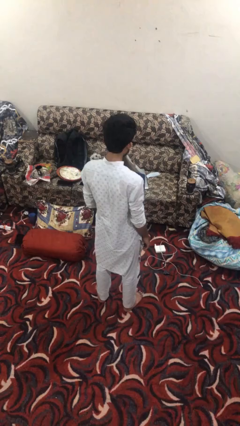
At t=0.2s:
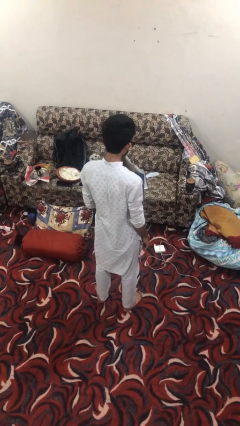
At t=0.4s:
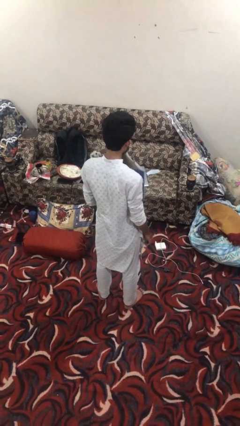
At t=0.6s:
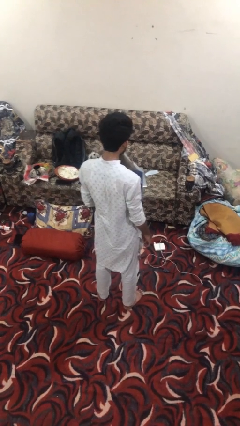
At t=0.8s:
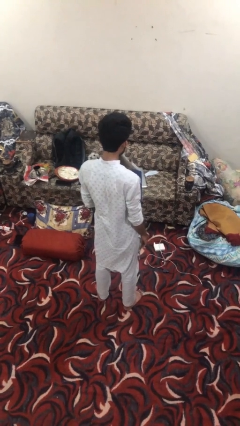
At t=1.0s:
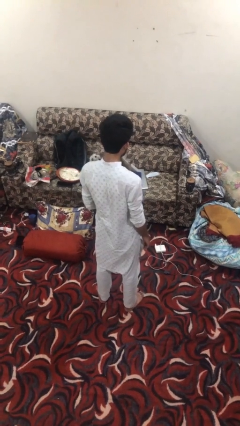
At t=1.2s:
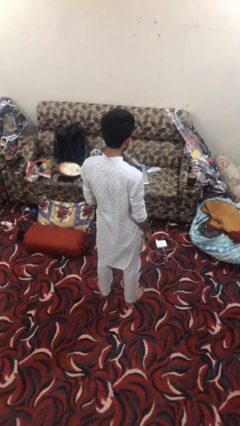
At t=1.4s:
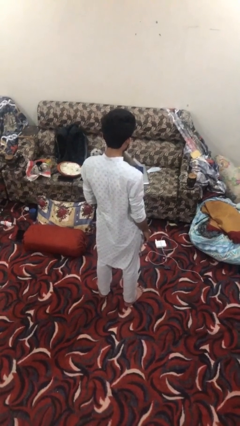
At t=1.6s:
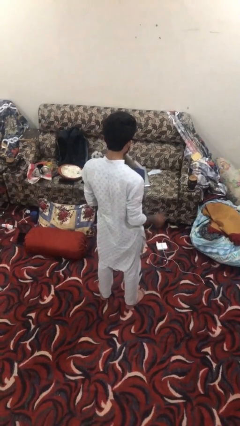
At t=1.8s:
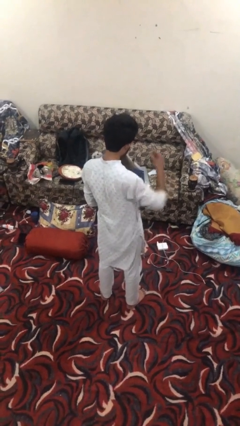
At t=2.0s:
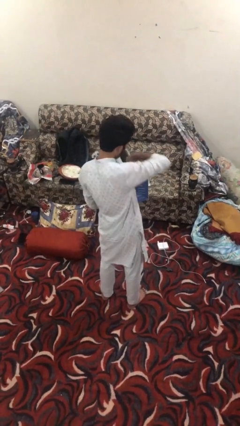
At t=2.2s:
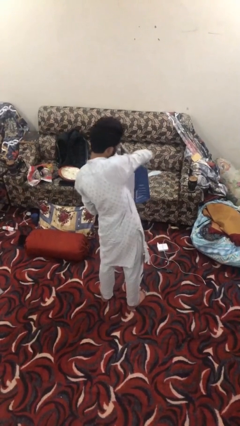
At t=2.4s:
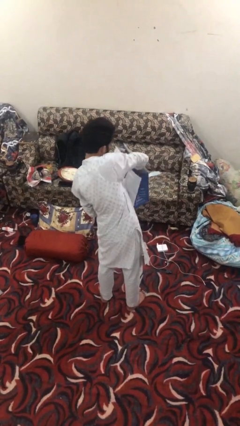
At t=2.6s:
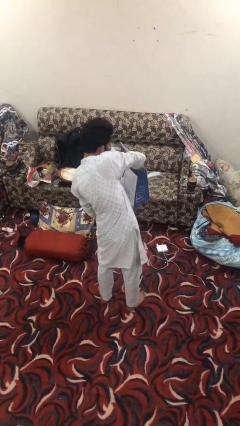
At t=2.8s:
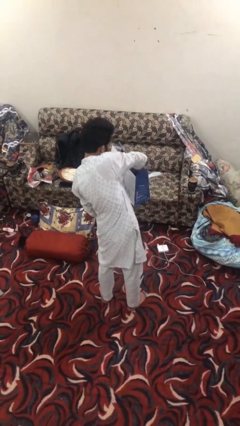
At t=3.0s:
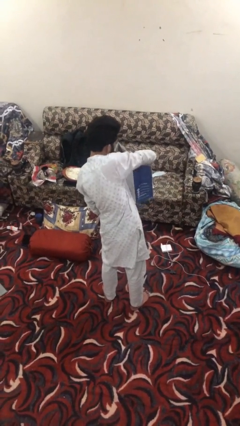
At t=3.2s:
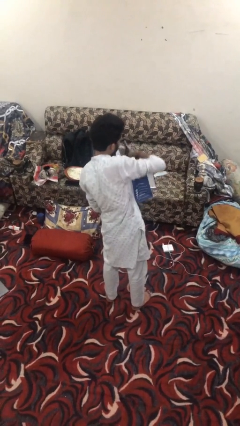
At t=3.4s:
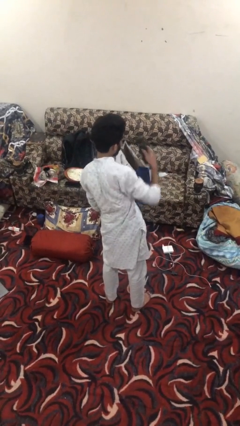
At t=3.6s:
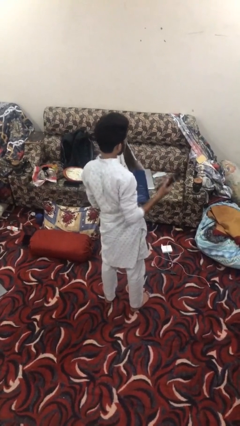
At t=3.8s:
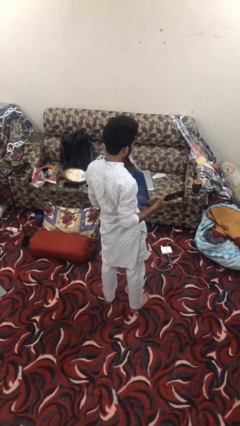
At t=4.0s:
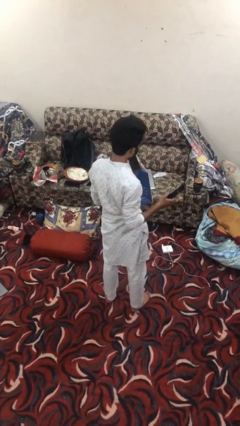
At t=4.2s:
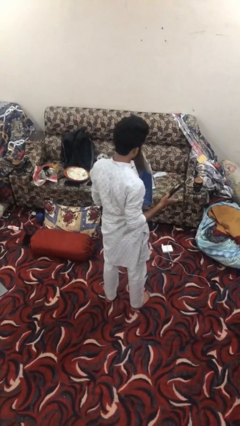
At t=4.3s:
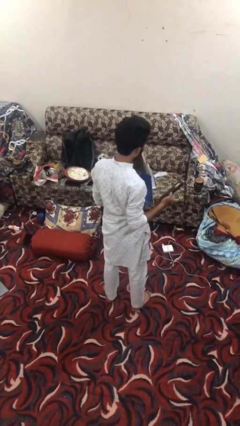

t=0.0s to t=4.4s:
person takes object from bag

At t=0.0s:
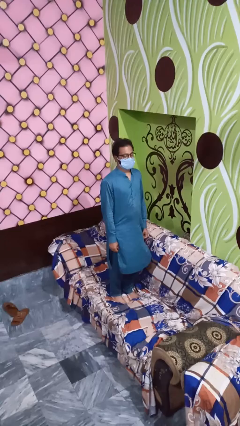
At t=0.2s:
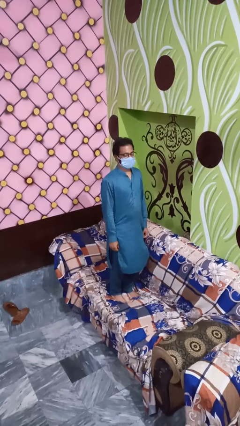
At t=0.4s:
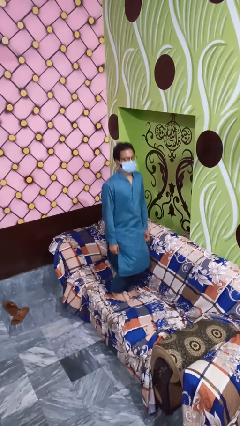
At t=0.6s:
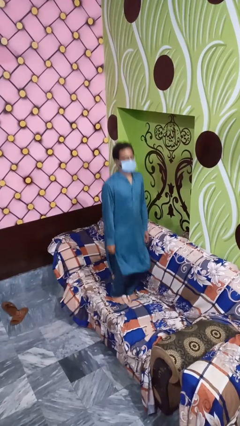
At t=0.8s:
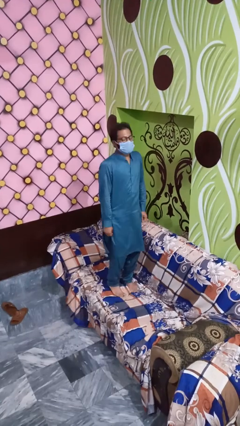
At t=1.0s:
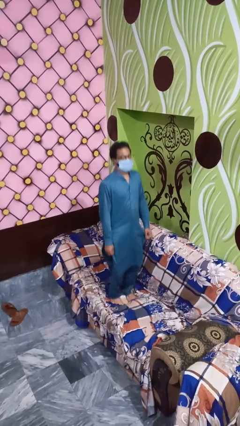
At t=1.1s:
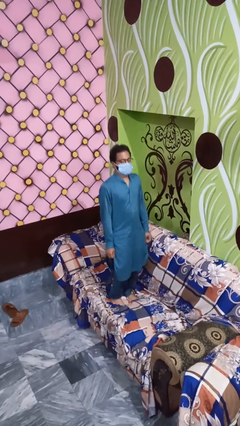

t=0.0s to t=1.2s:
person jumps on couch

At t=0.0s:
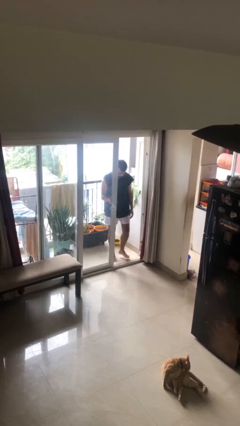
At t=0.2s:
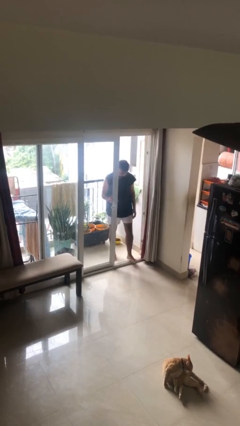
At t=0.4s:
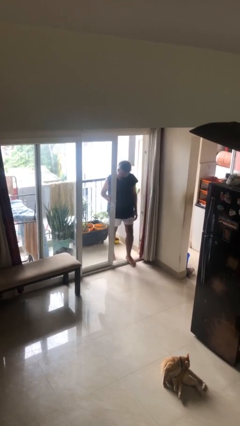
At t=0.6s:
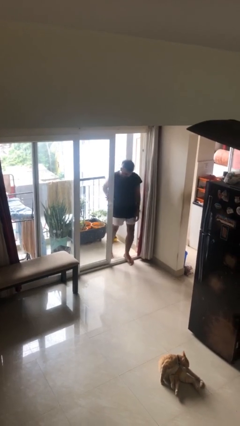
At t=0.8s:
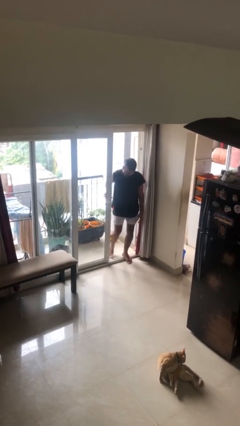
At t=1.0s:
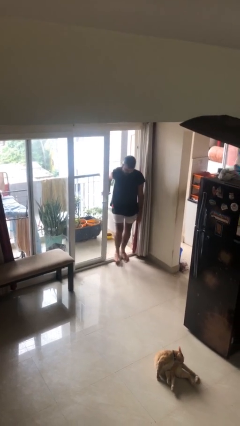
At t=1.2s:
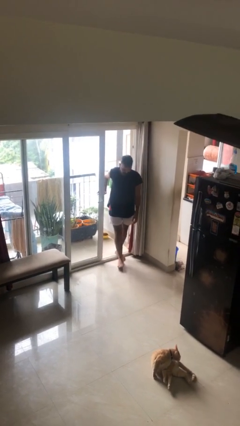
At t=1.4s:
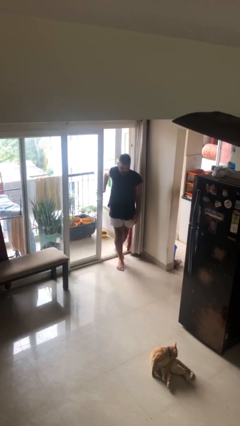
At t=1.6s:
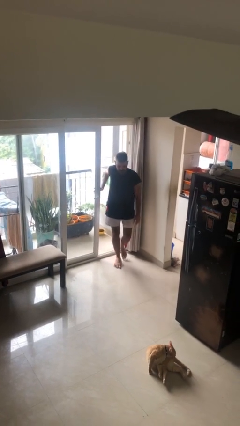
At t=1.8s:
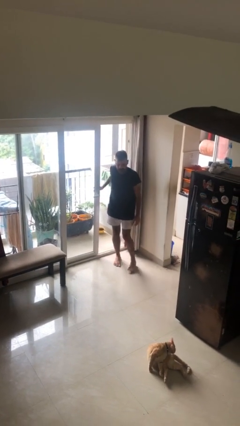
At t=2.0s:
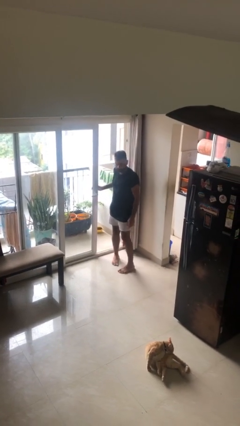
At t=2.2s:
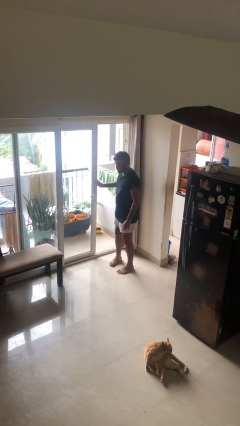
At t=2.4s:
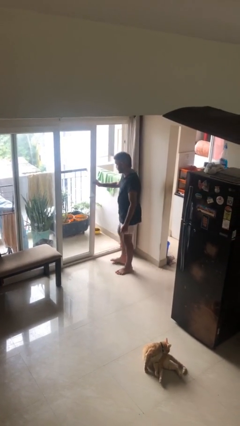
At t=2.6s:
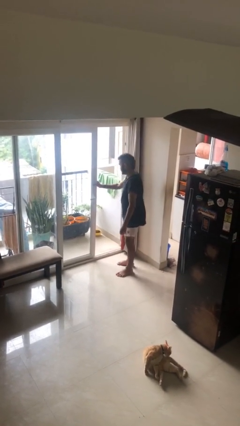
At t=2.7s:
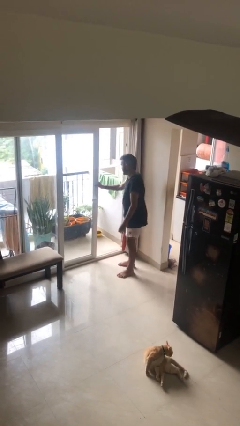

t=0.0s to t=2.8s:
person enters scene through structure

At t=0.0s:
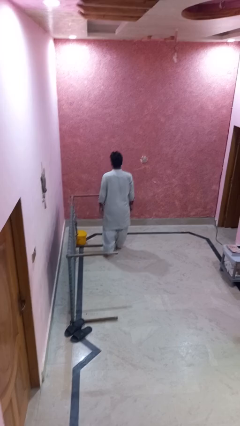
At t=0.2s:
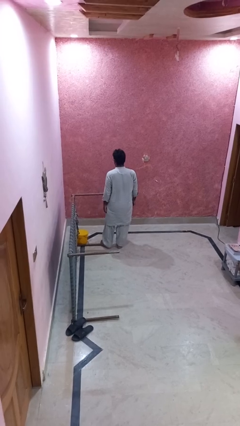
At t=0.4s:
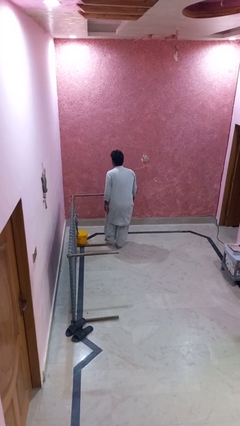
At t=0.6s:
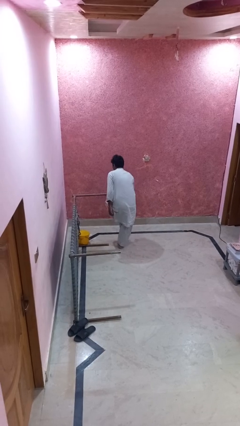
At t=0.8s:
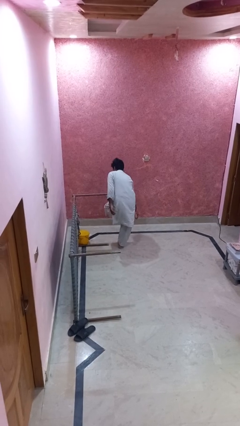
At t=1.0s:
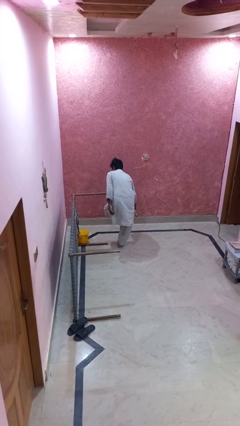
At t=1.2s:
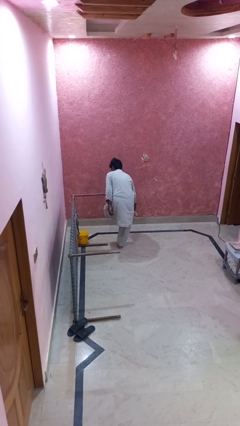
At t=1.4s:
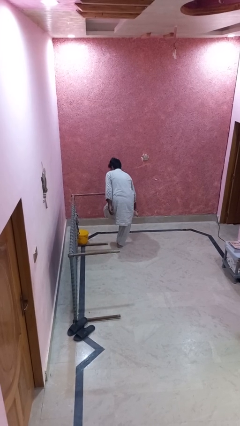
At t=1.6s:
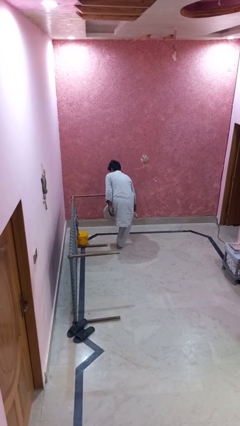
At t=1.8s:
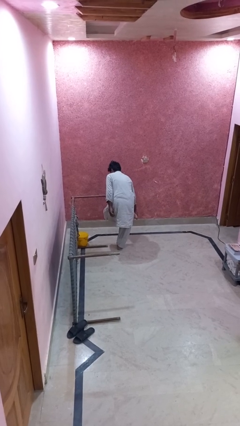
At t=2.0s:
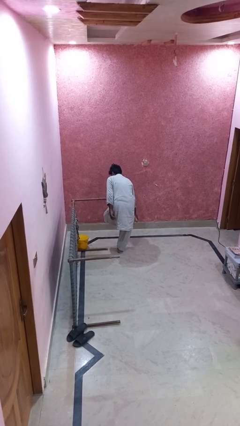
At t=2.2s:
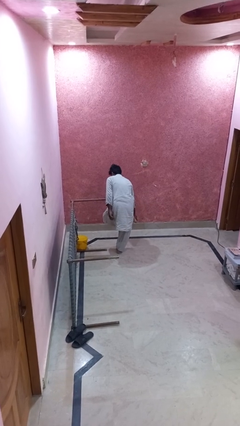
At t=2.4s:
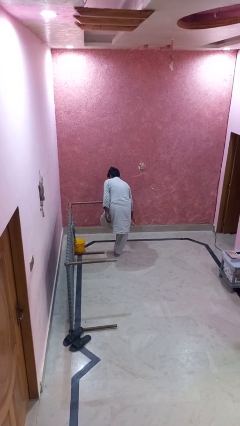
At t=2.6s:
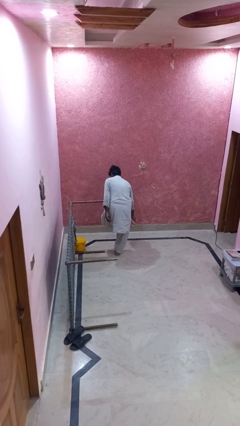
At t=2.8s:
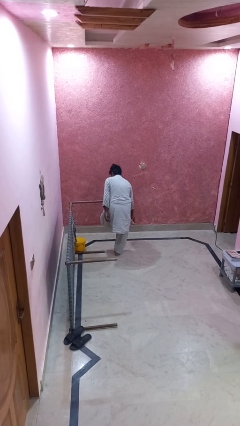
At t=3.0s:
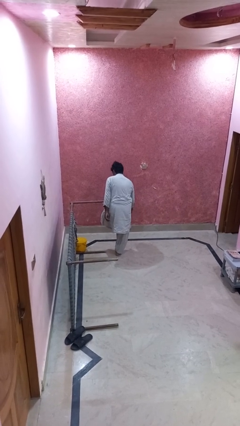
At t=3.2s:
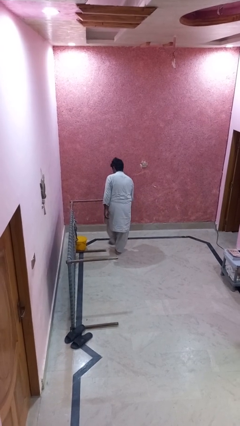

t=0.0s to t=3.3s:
person stubs toe

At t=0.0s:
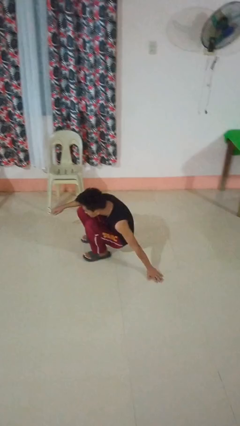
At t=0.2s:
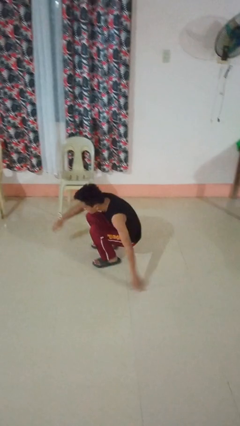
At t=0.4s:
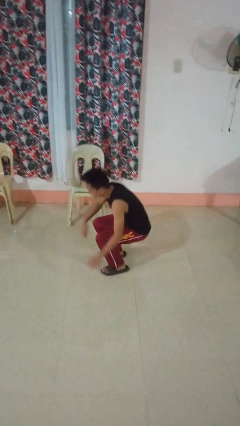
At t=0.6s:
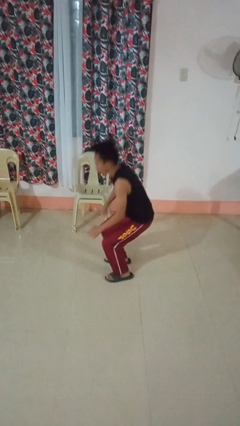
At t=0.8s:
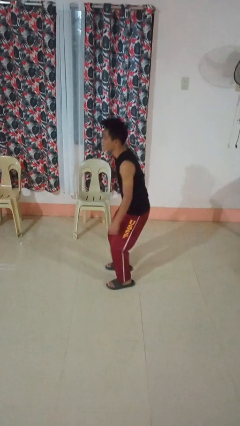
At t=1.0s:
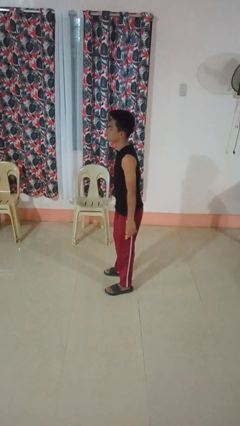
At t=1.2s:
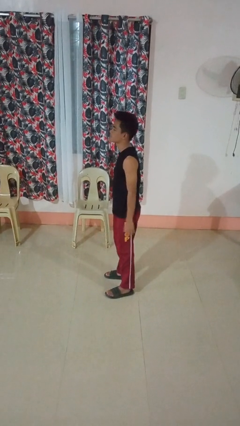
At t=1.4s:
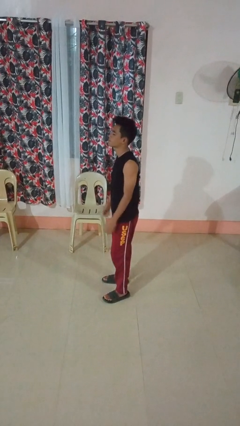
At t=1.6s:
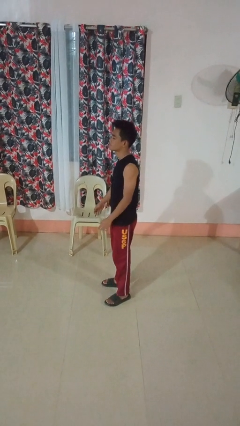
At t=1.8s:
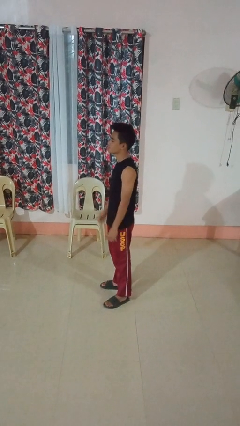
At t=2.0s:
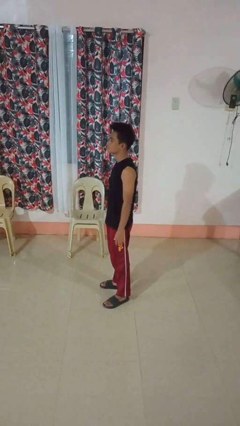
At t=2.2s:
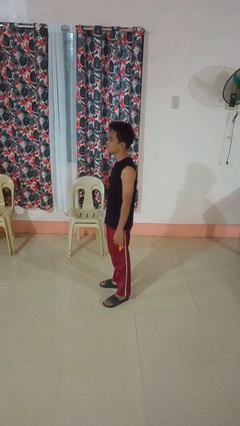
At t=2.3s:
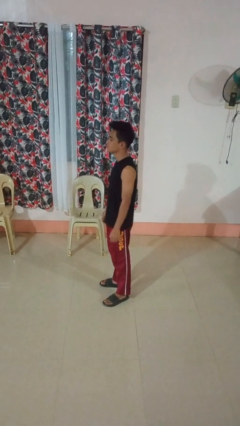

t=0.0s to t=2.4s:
person stands up from floor

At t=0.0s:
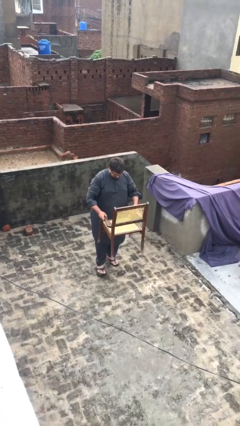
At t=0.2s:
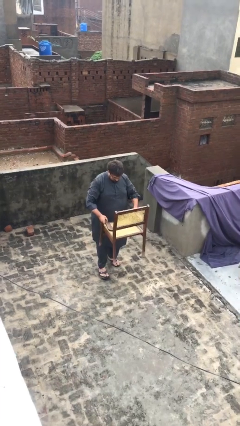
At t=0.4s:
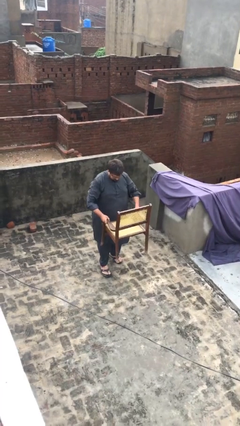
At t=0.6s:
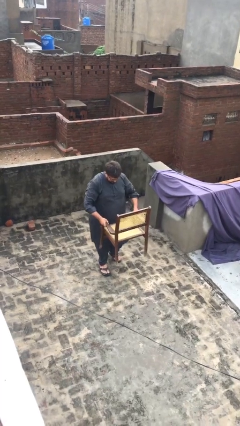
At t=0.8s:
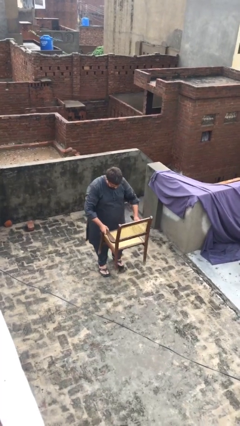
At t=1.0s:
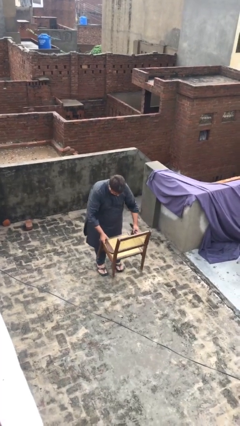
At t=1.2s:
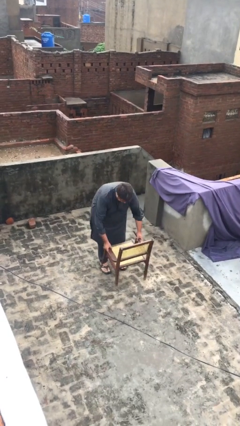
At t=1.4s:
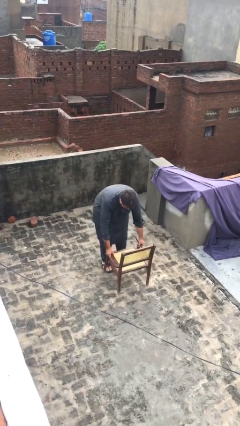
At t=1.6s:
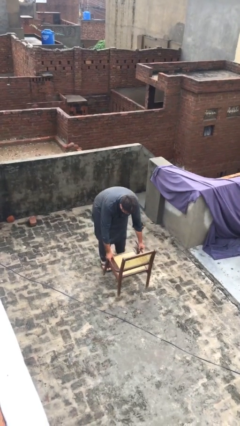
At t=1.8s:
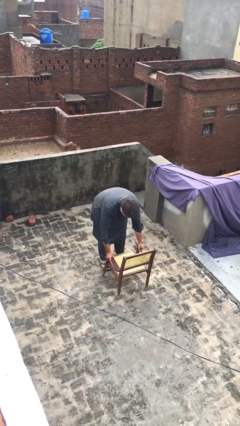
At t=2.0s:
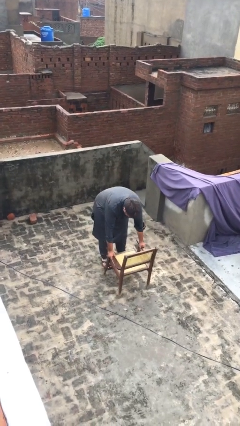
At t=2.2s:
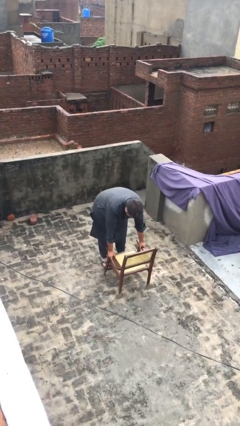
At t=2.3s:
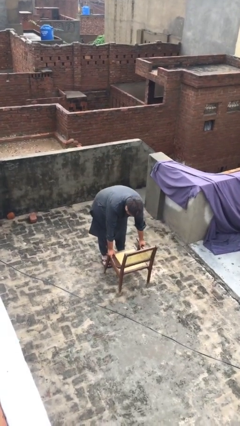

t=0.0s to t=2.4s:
person puts down object on floor

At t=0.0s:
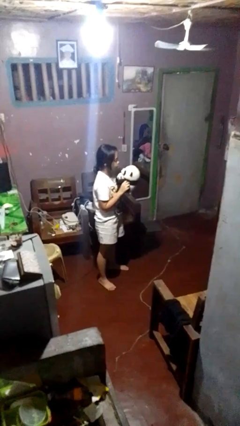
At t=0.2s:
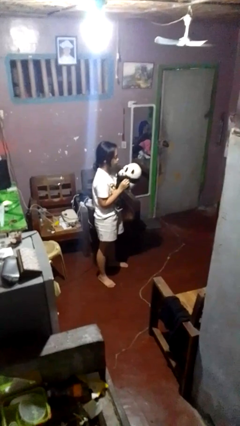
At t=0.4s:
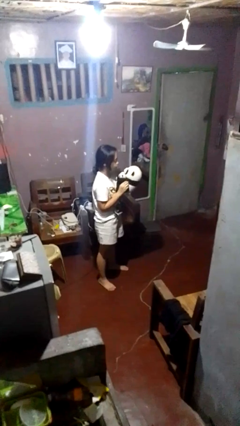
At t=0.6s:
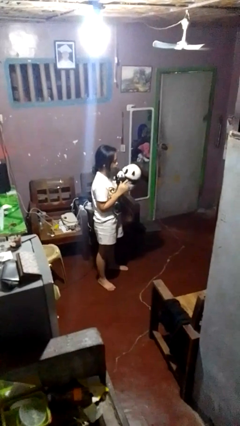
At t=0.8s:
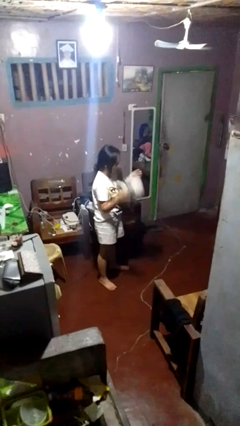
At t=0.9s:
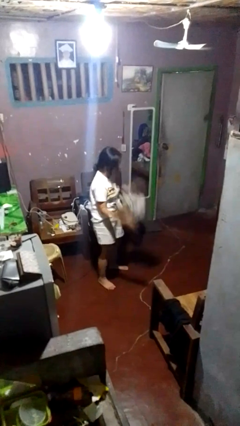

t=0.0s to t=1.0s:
person drops object
